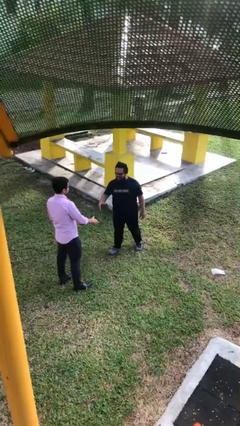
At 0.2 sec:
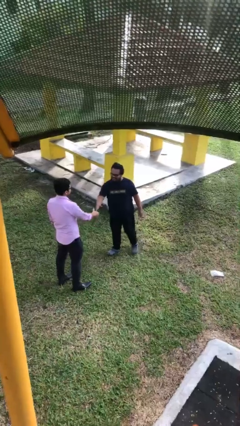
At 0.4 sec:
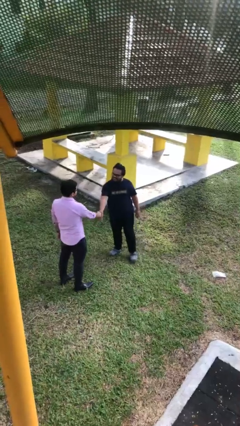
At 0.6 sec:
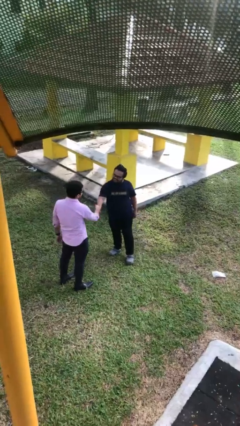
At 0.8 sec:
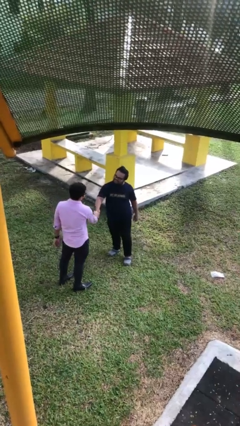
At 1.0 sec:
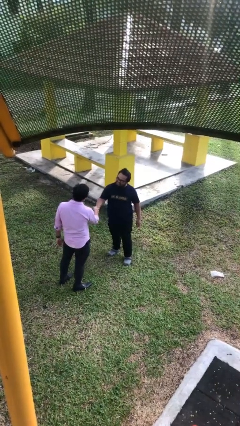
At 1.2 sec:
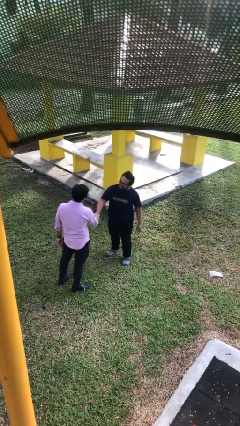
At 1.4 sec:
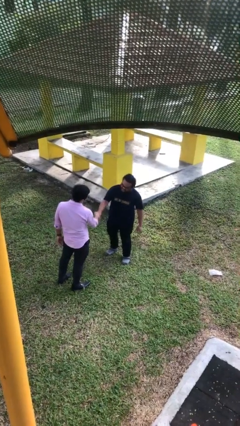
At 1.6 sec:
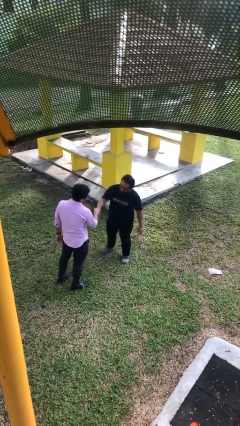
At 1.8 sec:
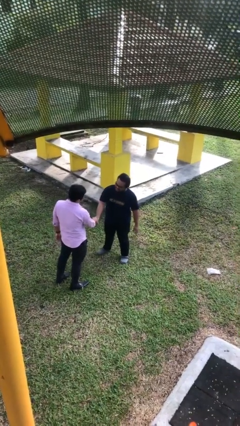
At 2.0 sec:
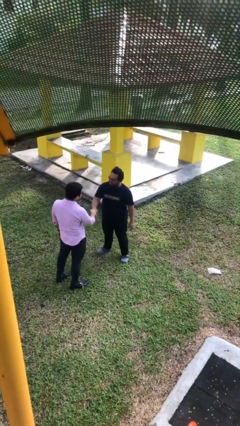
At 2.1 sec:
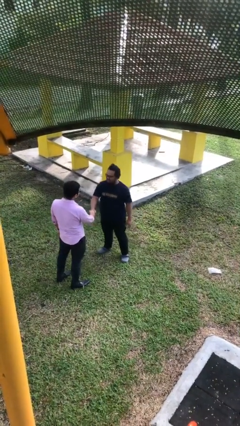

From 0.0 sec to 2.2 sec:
person shakes hand

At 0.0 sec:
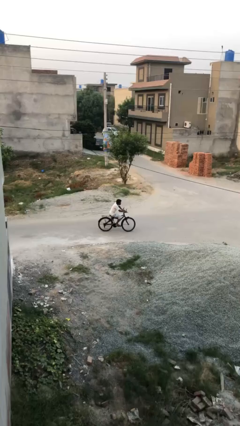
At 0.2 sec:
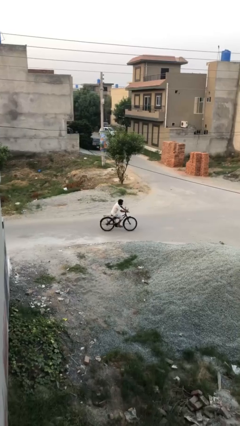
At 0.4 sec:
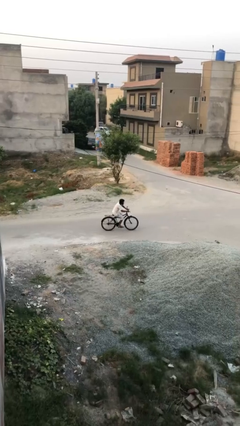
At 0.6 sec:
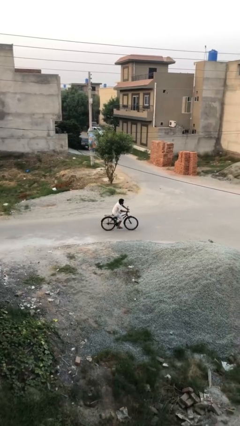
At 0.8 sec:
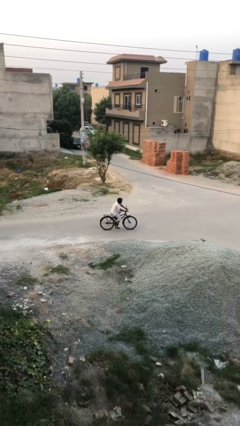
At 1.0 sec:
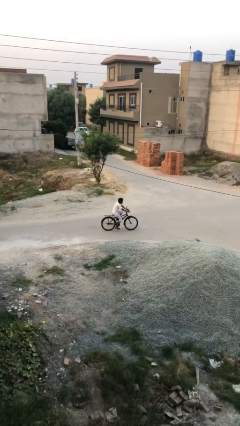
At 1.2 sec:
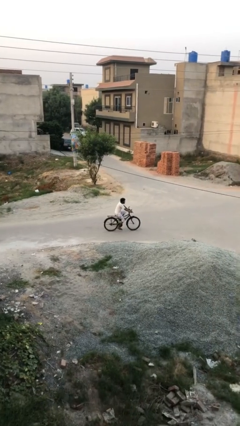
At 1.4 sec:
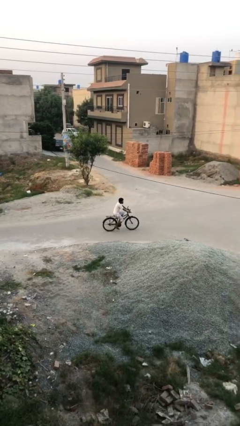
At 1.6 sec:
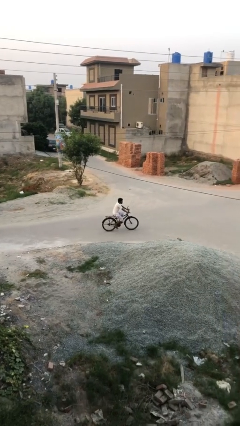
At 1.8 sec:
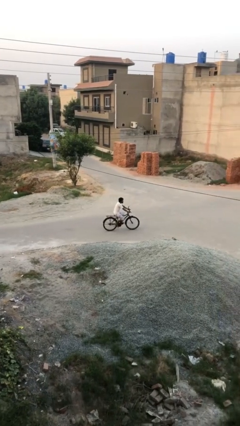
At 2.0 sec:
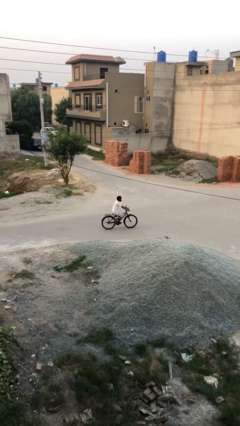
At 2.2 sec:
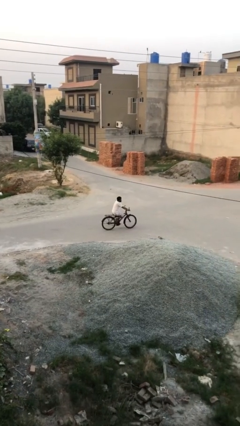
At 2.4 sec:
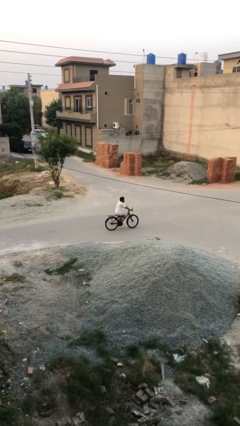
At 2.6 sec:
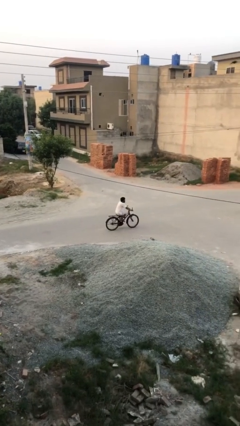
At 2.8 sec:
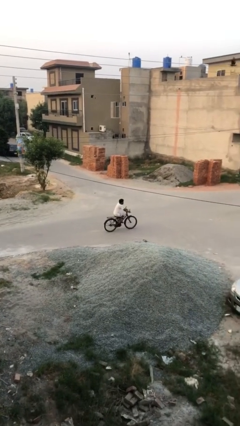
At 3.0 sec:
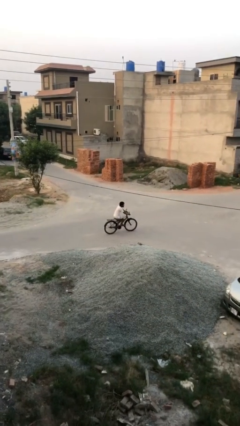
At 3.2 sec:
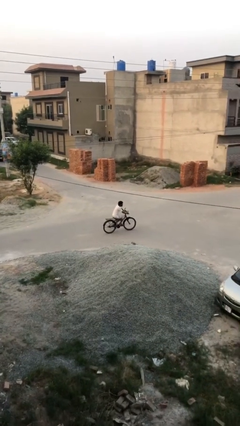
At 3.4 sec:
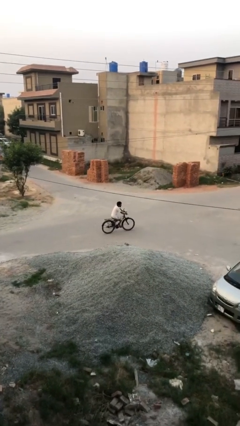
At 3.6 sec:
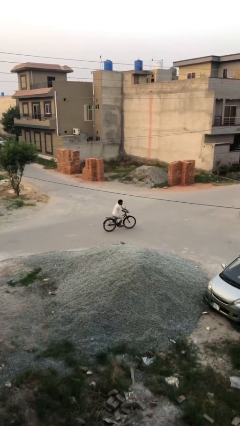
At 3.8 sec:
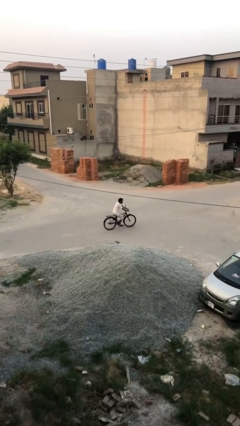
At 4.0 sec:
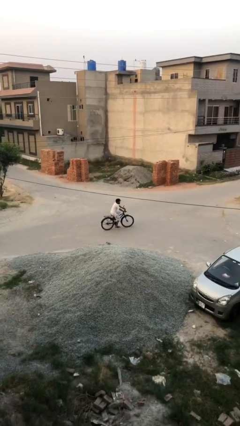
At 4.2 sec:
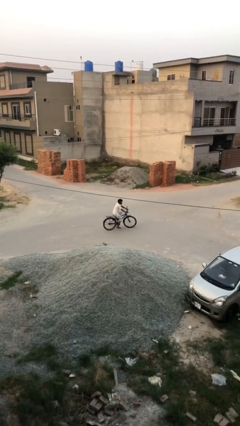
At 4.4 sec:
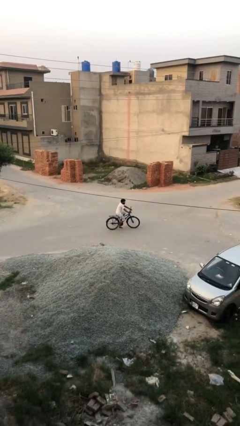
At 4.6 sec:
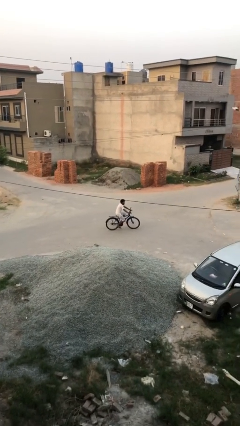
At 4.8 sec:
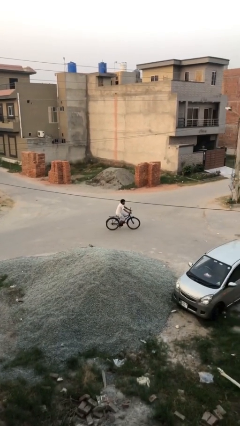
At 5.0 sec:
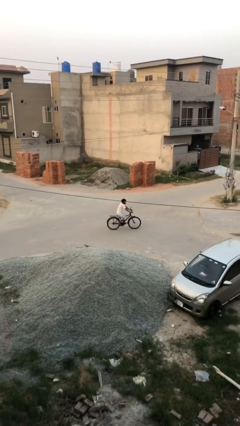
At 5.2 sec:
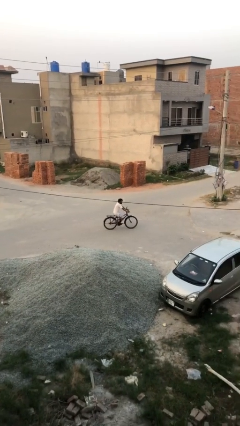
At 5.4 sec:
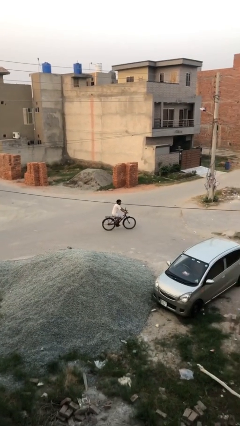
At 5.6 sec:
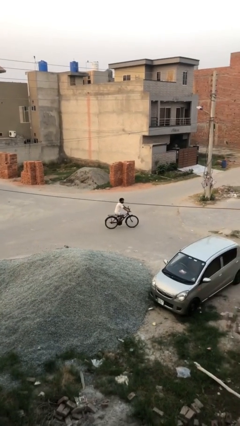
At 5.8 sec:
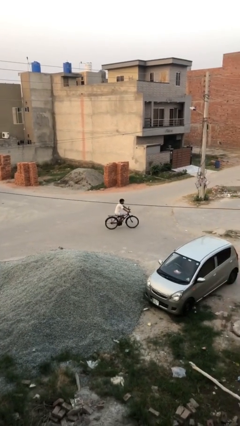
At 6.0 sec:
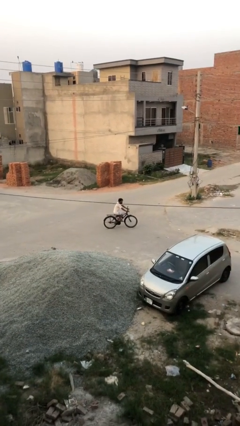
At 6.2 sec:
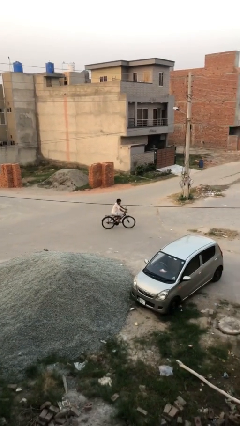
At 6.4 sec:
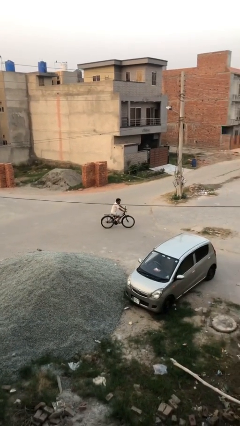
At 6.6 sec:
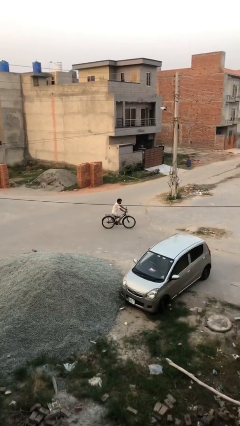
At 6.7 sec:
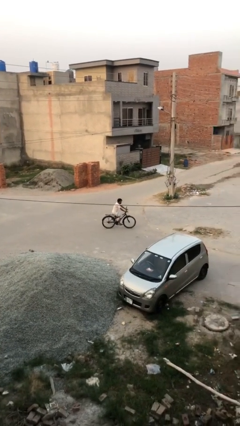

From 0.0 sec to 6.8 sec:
person rides bicycle

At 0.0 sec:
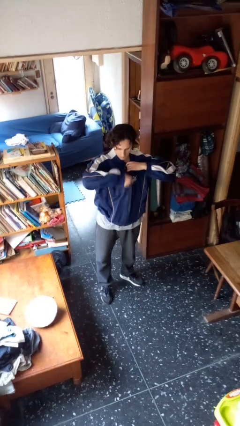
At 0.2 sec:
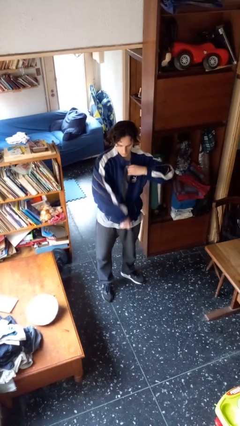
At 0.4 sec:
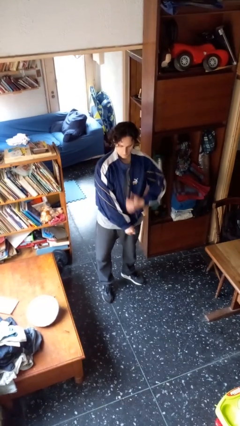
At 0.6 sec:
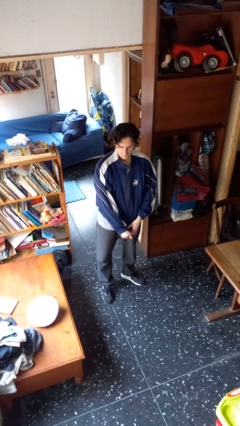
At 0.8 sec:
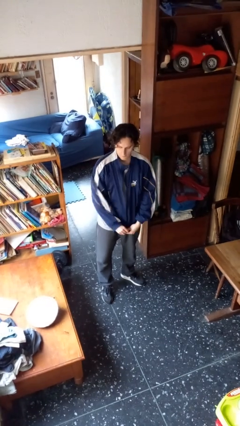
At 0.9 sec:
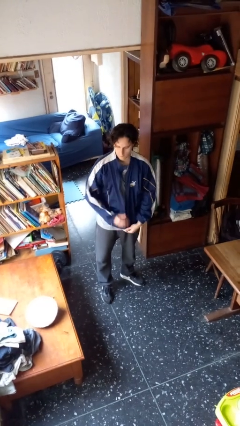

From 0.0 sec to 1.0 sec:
person unzips jacket

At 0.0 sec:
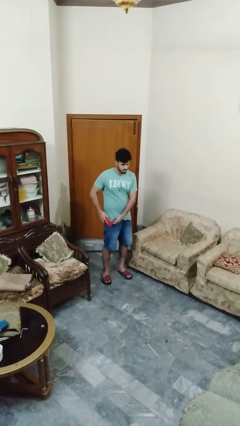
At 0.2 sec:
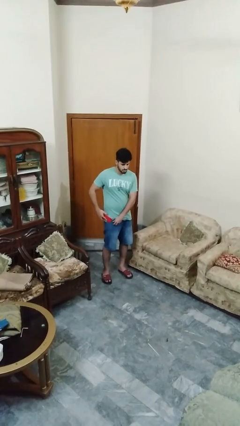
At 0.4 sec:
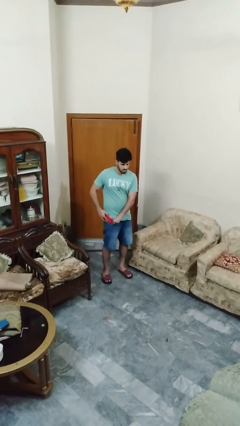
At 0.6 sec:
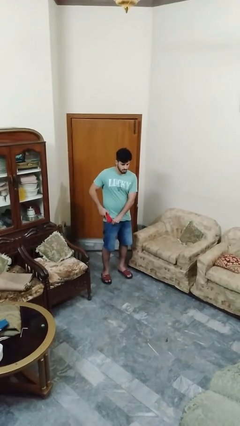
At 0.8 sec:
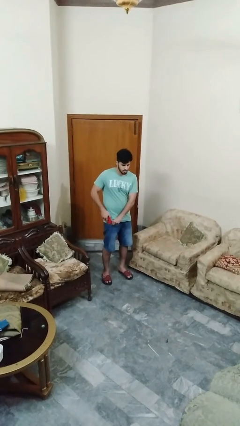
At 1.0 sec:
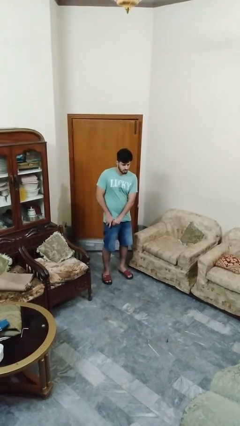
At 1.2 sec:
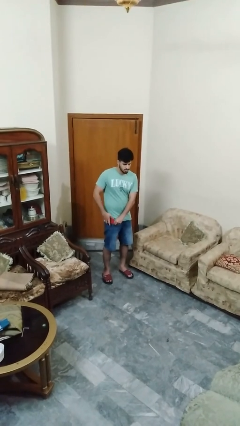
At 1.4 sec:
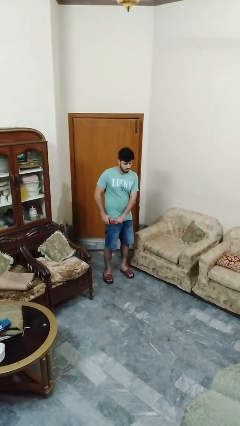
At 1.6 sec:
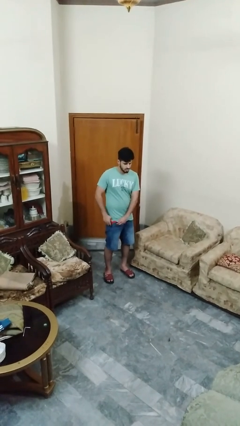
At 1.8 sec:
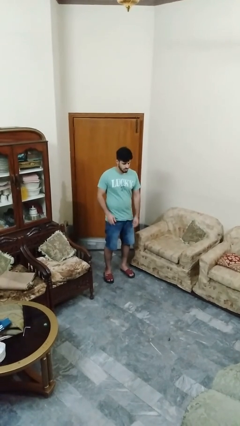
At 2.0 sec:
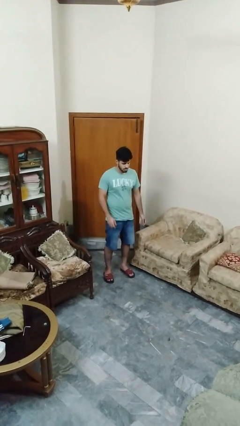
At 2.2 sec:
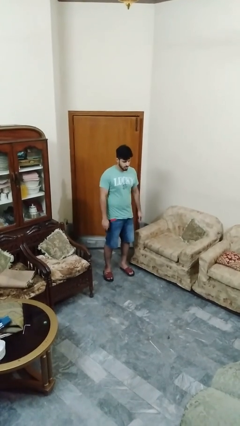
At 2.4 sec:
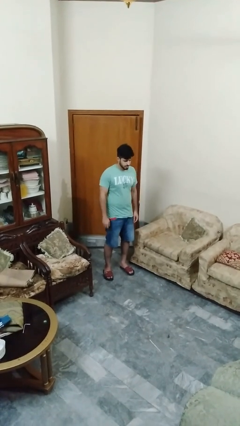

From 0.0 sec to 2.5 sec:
person puts phone into pocket

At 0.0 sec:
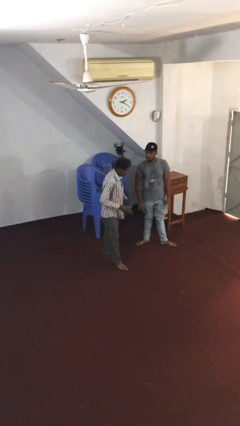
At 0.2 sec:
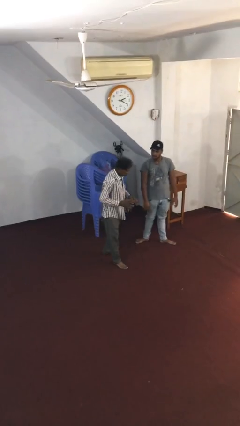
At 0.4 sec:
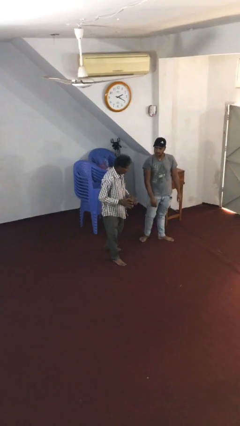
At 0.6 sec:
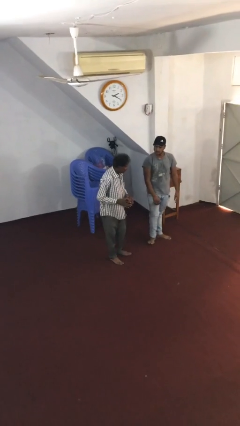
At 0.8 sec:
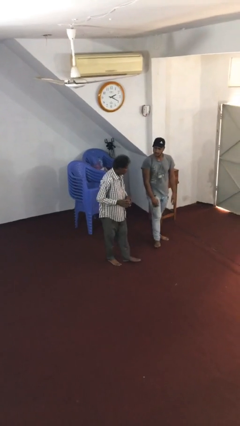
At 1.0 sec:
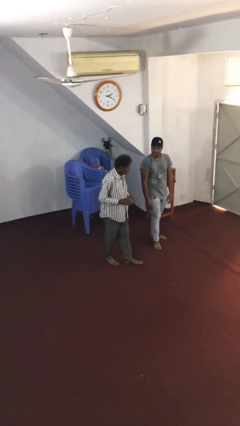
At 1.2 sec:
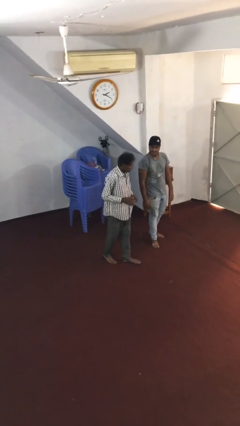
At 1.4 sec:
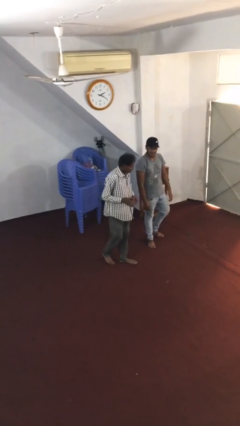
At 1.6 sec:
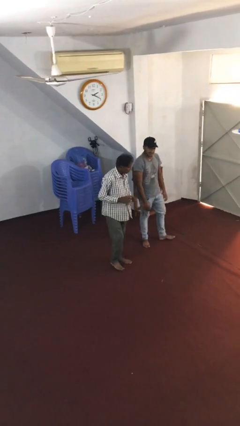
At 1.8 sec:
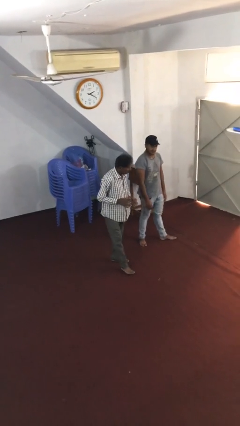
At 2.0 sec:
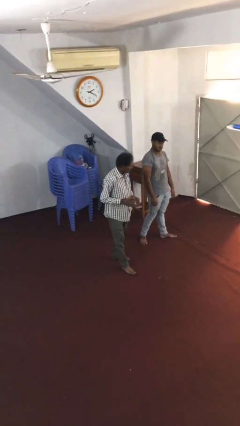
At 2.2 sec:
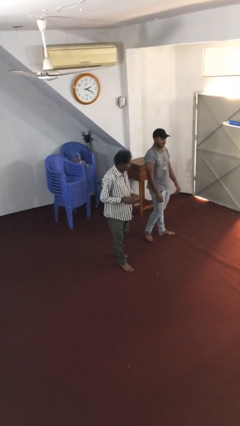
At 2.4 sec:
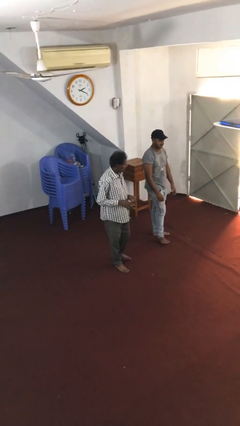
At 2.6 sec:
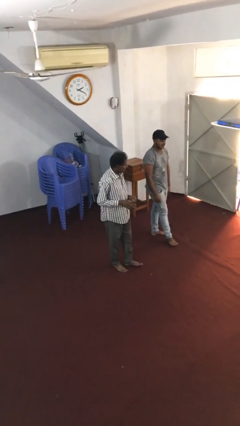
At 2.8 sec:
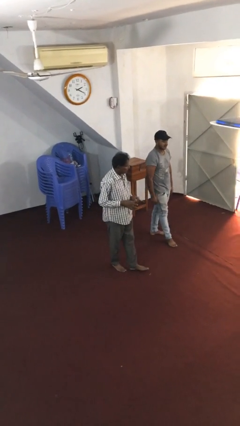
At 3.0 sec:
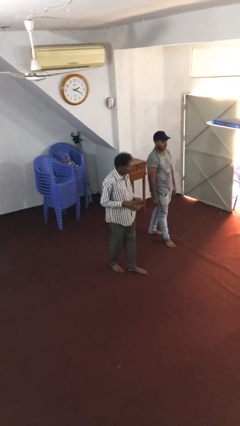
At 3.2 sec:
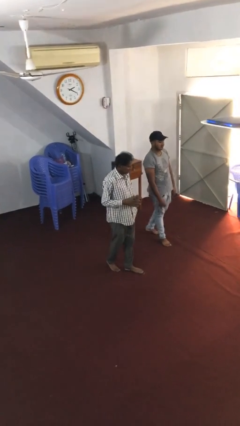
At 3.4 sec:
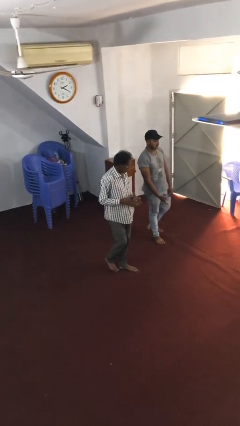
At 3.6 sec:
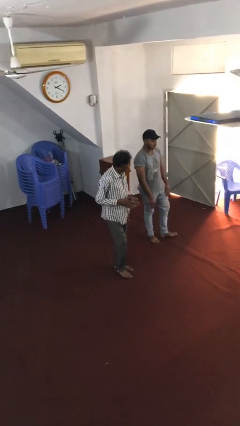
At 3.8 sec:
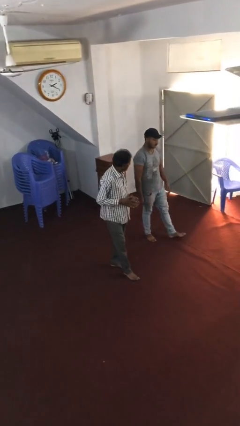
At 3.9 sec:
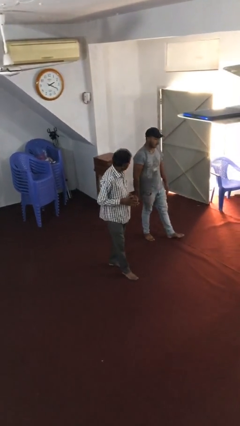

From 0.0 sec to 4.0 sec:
person talks to person

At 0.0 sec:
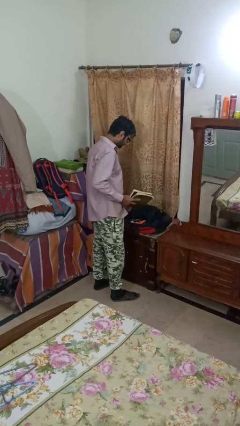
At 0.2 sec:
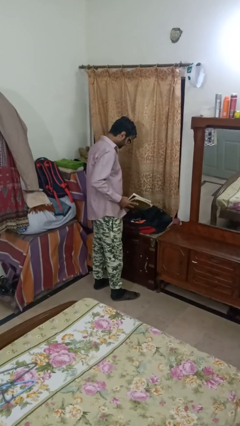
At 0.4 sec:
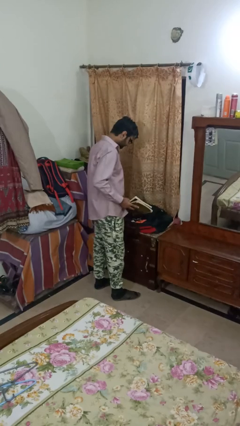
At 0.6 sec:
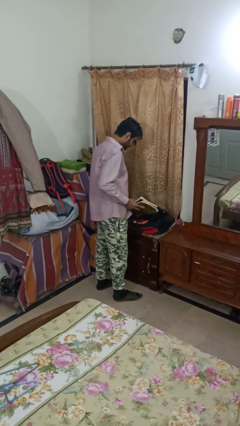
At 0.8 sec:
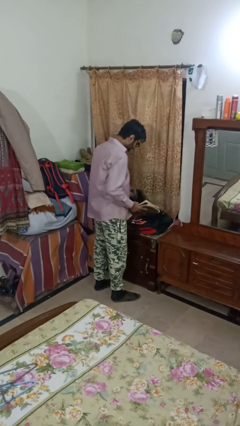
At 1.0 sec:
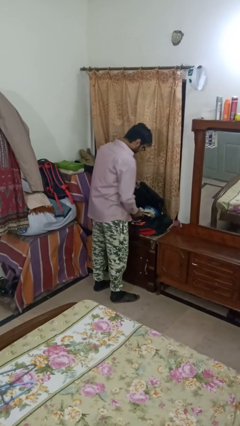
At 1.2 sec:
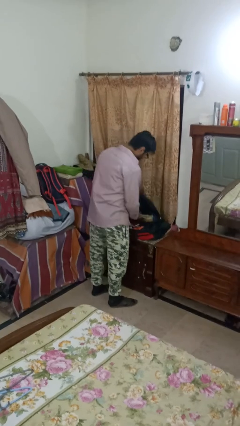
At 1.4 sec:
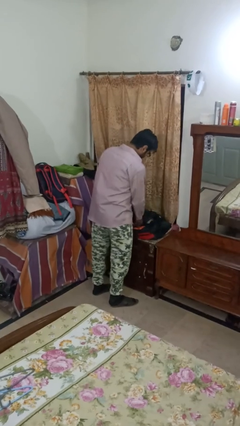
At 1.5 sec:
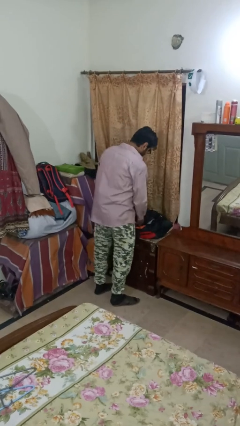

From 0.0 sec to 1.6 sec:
person puts object into bag
